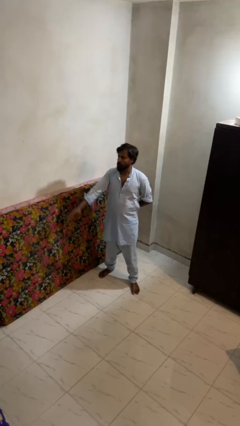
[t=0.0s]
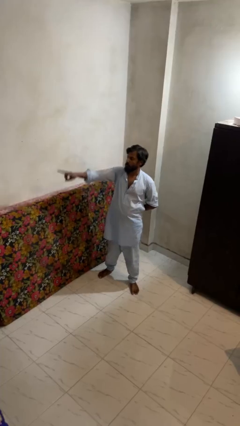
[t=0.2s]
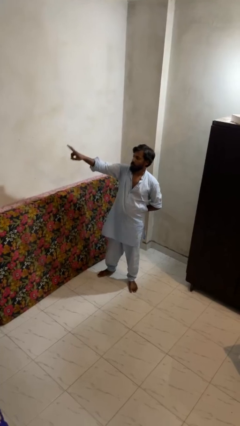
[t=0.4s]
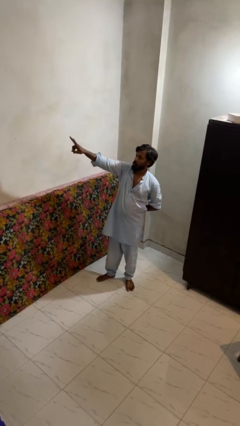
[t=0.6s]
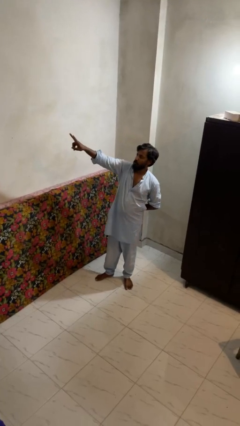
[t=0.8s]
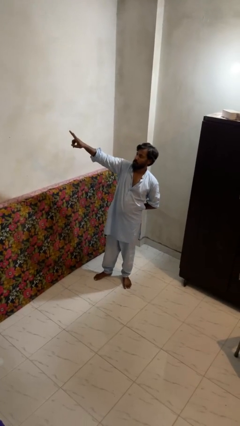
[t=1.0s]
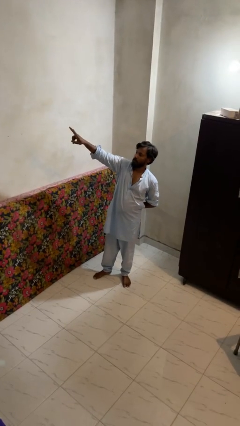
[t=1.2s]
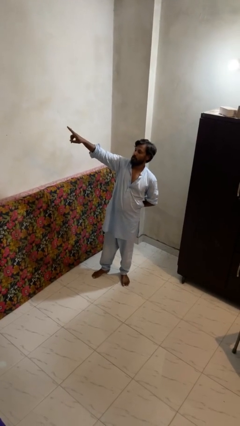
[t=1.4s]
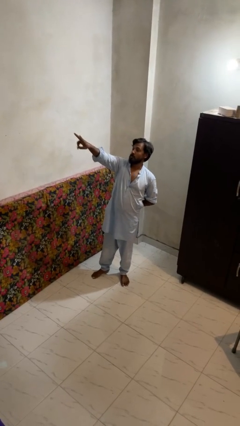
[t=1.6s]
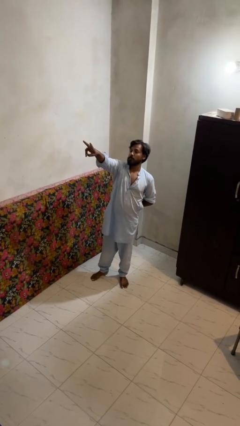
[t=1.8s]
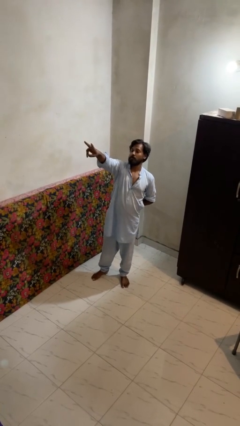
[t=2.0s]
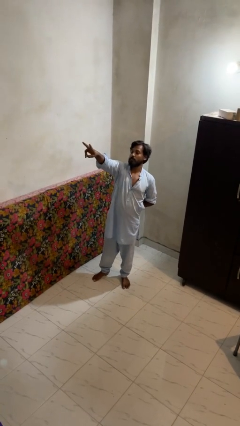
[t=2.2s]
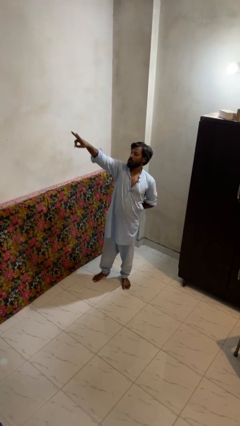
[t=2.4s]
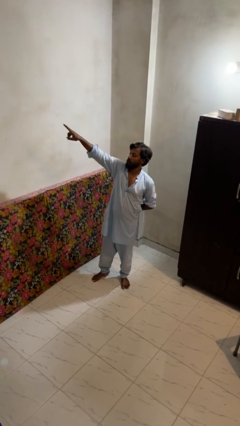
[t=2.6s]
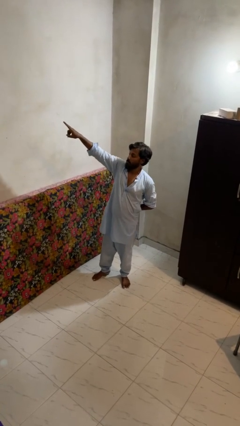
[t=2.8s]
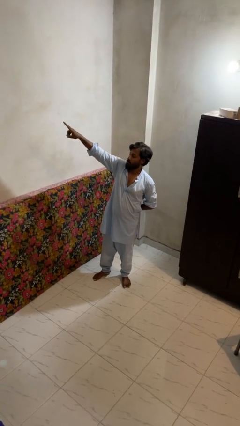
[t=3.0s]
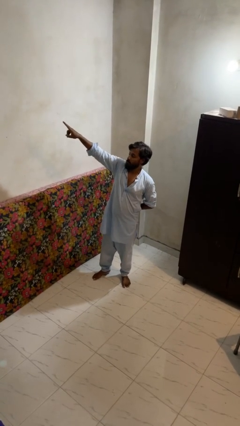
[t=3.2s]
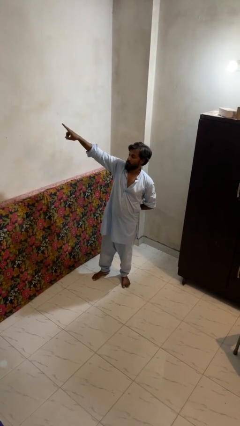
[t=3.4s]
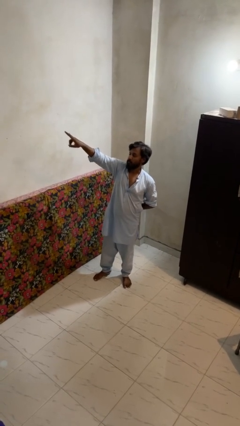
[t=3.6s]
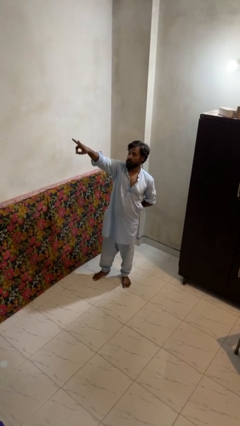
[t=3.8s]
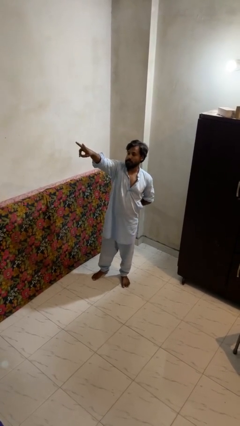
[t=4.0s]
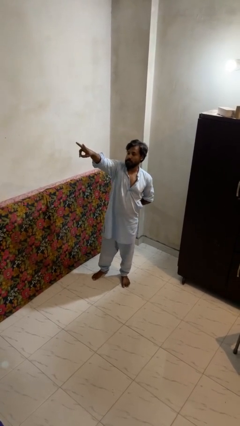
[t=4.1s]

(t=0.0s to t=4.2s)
person gestures peace

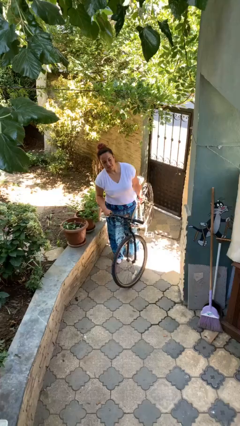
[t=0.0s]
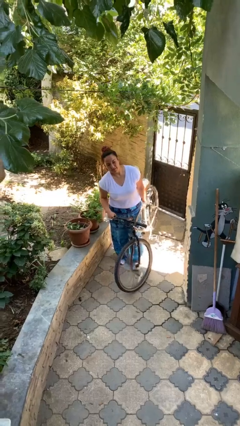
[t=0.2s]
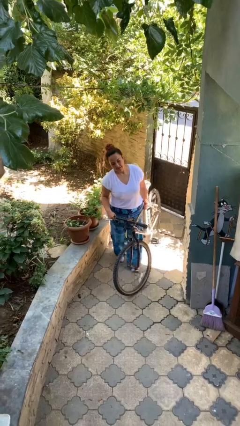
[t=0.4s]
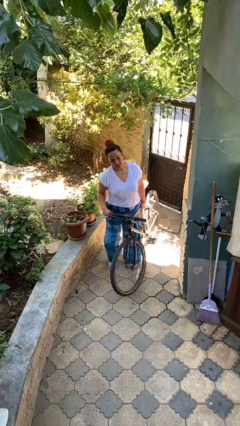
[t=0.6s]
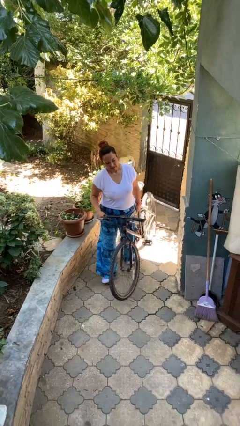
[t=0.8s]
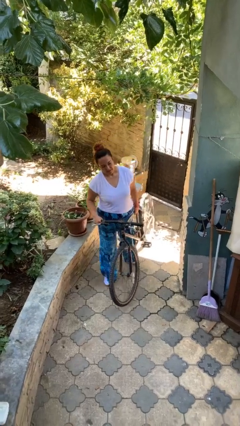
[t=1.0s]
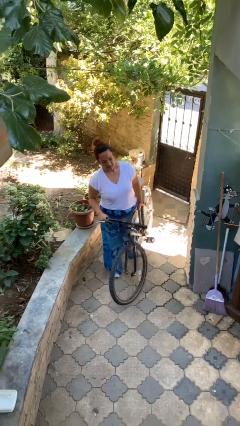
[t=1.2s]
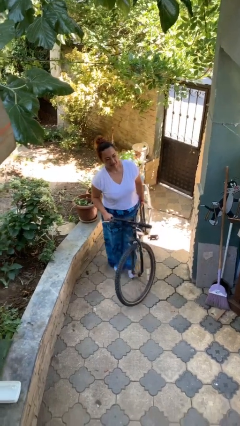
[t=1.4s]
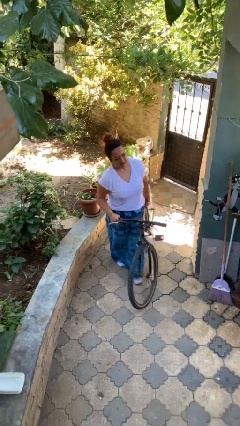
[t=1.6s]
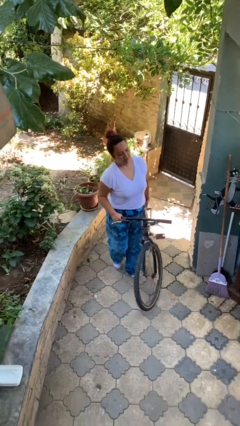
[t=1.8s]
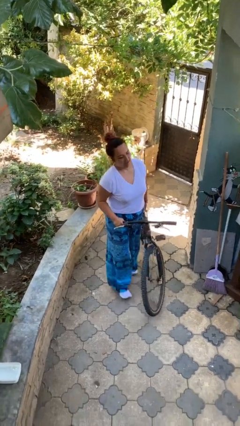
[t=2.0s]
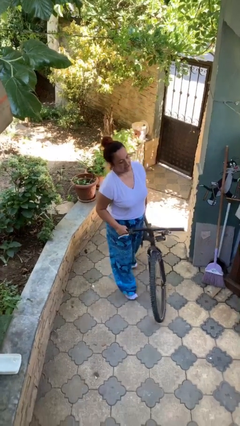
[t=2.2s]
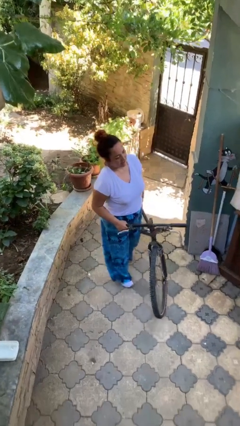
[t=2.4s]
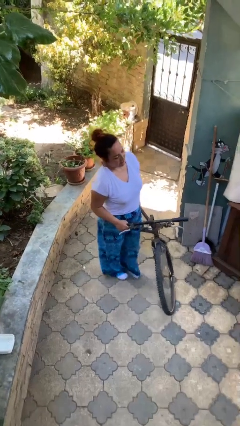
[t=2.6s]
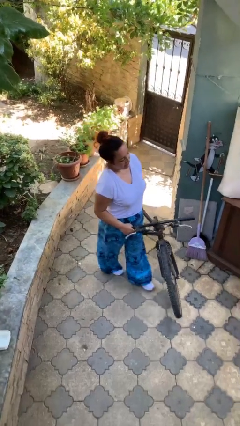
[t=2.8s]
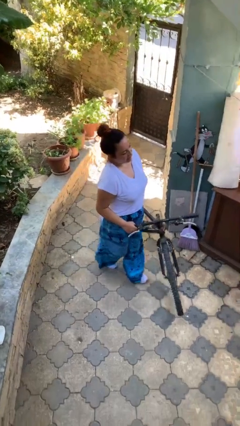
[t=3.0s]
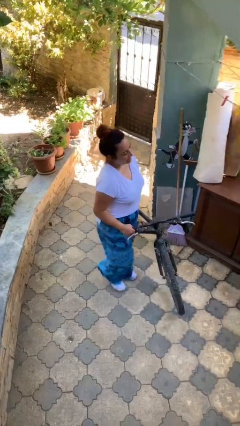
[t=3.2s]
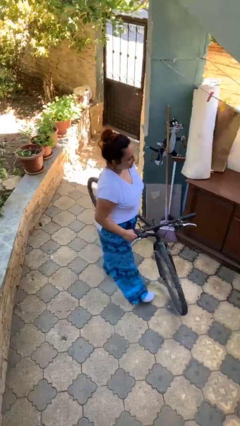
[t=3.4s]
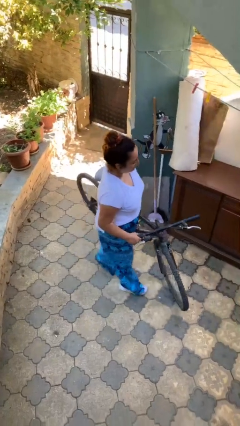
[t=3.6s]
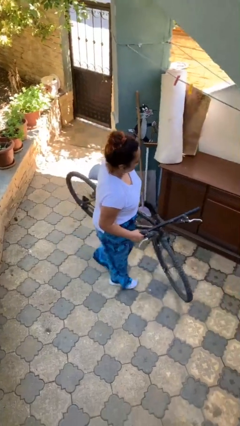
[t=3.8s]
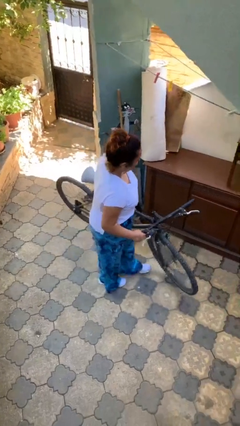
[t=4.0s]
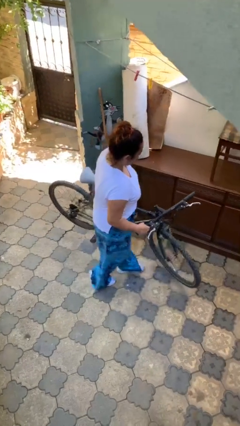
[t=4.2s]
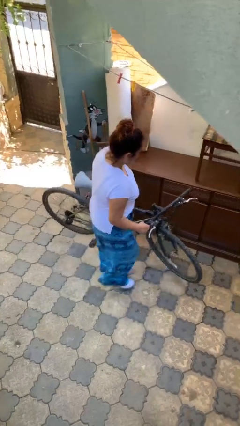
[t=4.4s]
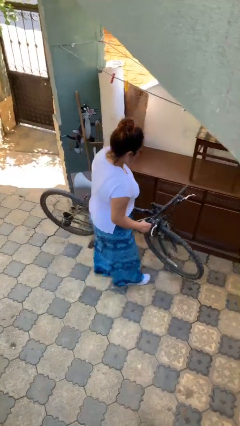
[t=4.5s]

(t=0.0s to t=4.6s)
person carries heavy object

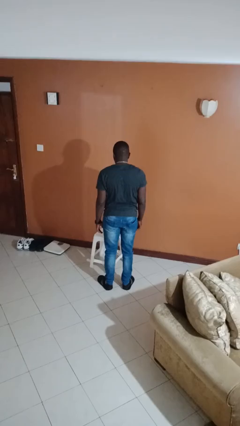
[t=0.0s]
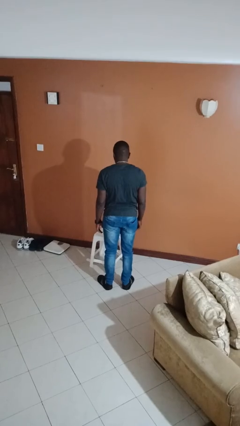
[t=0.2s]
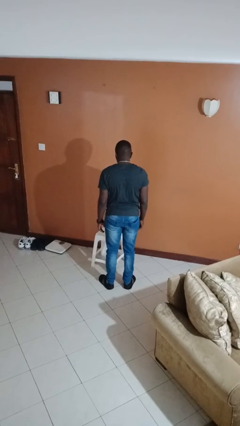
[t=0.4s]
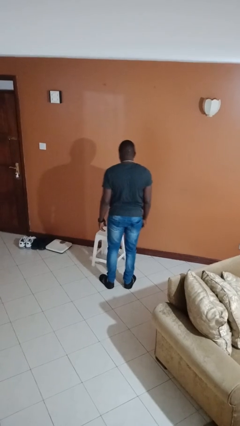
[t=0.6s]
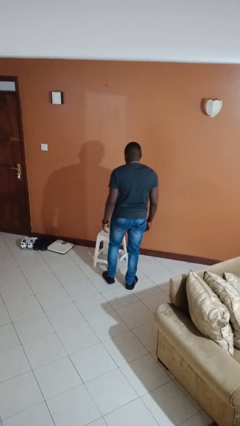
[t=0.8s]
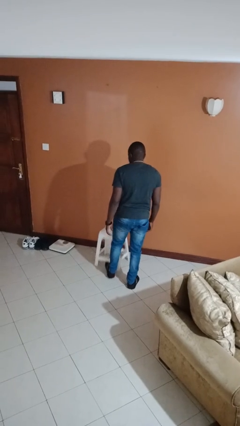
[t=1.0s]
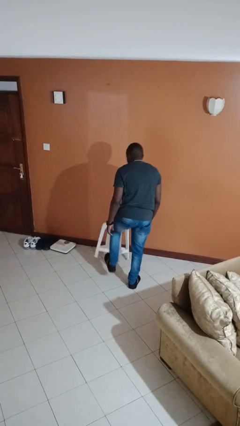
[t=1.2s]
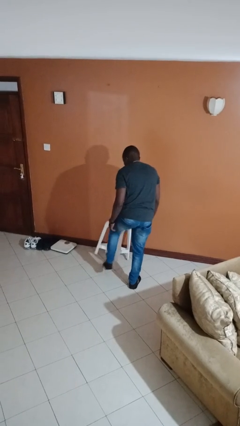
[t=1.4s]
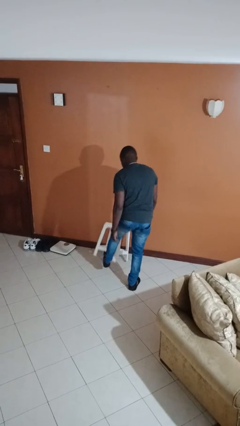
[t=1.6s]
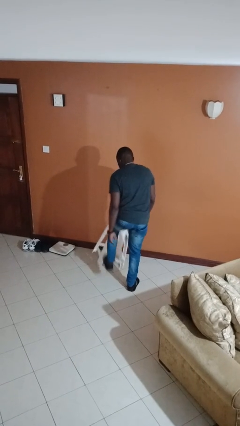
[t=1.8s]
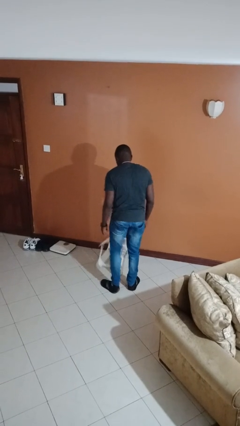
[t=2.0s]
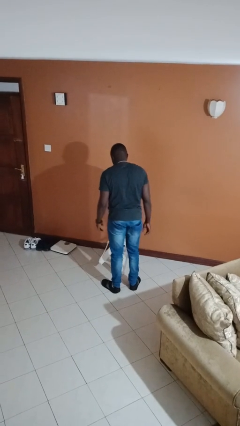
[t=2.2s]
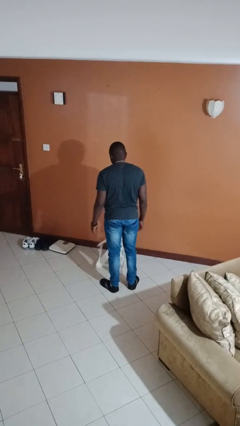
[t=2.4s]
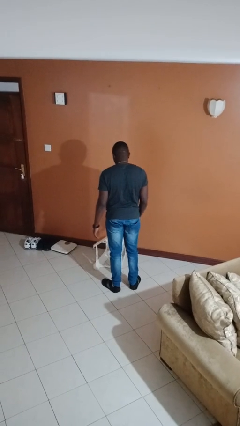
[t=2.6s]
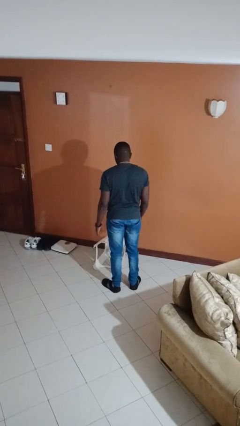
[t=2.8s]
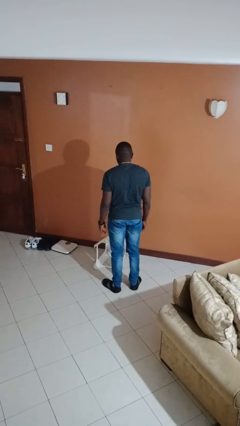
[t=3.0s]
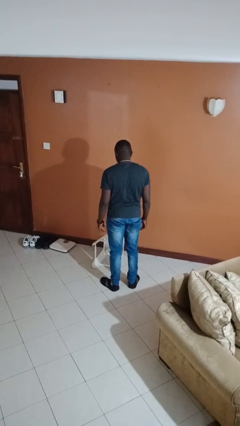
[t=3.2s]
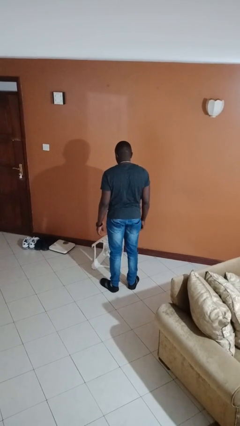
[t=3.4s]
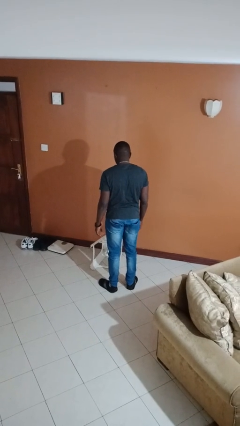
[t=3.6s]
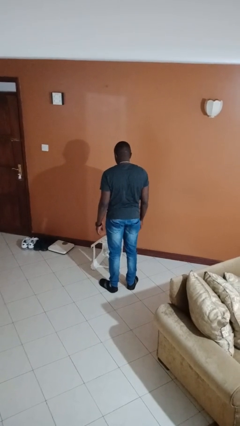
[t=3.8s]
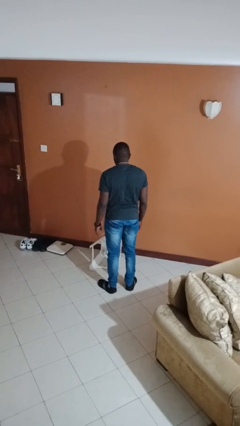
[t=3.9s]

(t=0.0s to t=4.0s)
person knocks over furniture

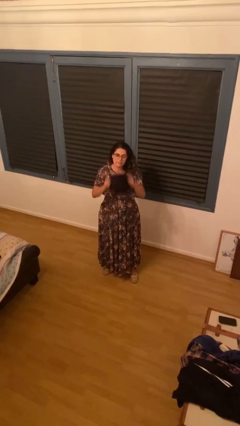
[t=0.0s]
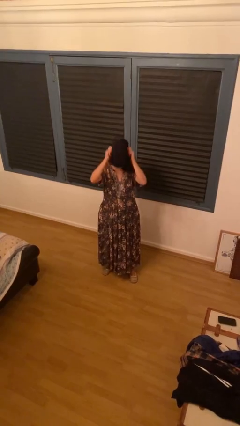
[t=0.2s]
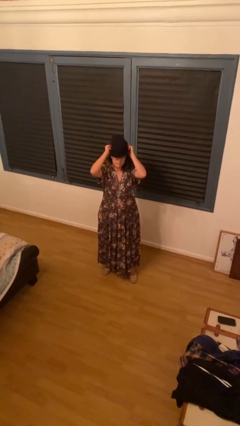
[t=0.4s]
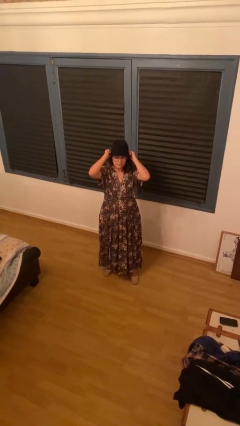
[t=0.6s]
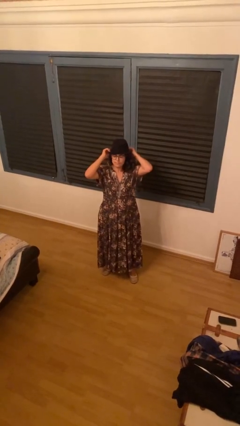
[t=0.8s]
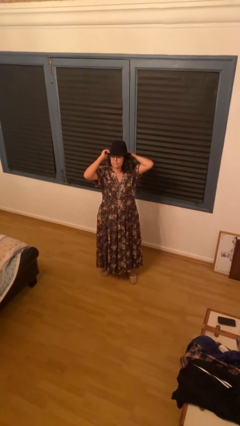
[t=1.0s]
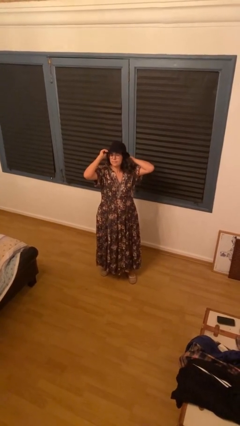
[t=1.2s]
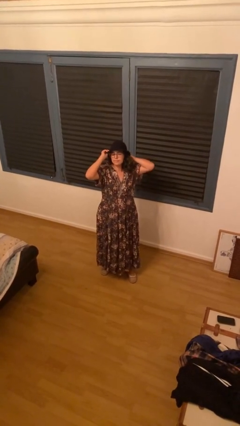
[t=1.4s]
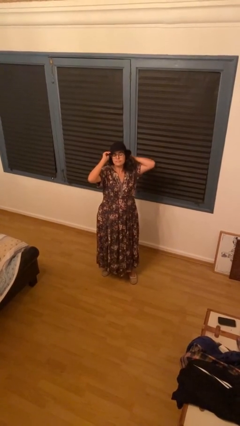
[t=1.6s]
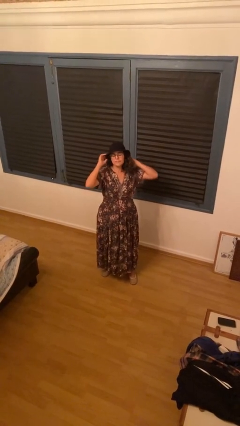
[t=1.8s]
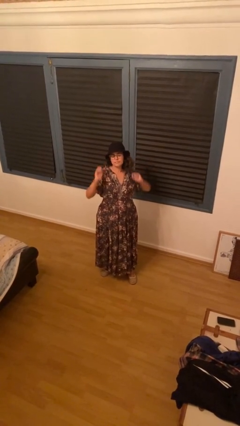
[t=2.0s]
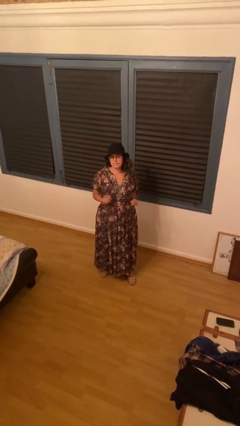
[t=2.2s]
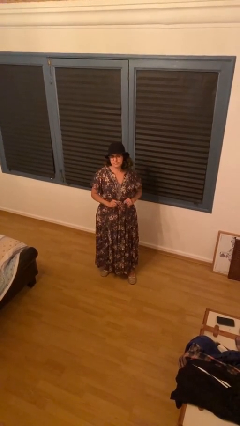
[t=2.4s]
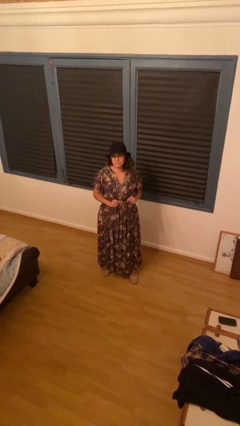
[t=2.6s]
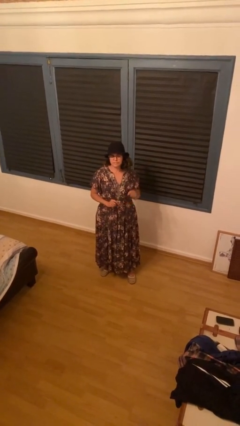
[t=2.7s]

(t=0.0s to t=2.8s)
person puts on hat

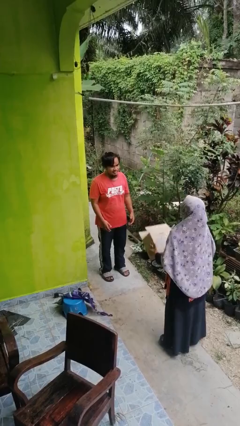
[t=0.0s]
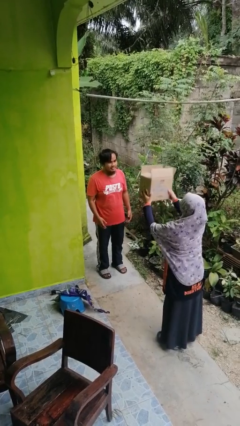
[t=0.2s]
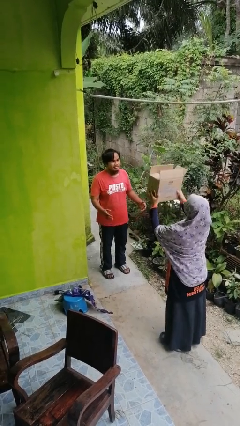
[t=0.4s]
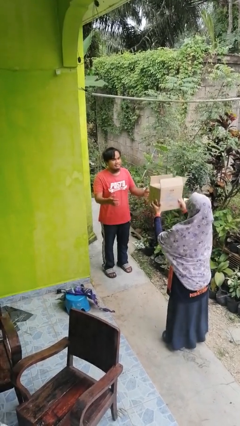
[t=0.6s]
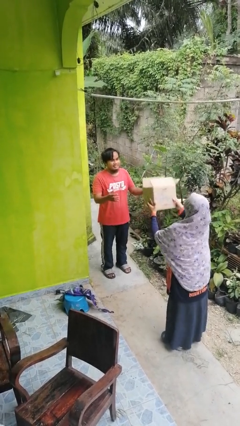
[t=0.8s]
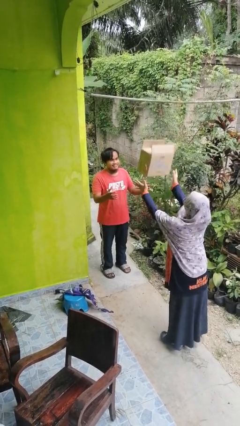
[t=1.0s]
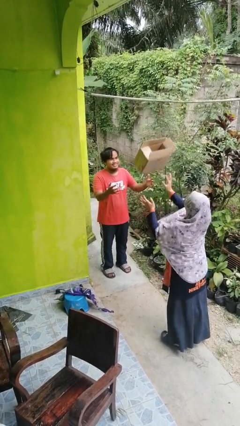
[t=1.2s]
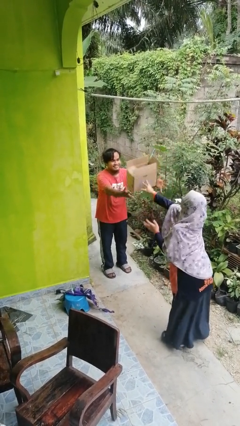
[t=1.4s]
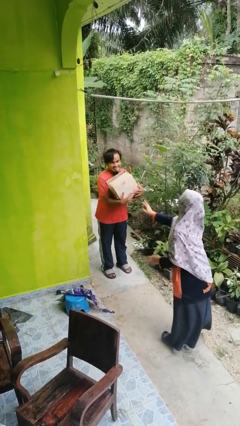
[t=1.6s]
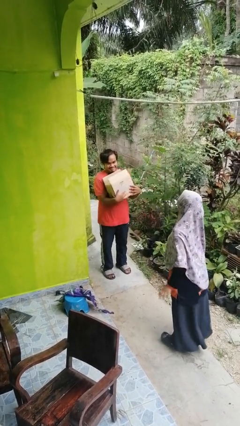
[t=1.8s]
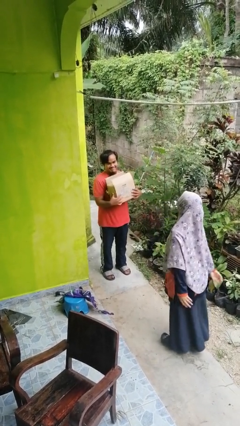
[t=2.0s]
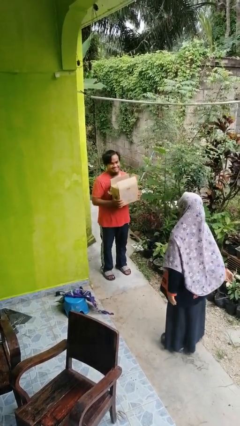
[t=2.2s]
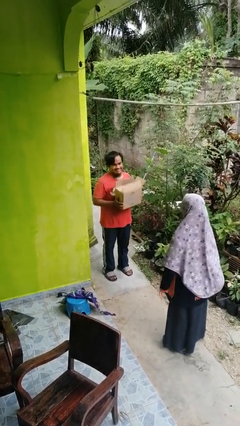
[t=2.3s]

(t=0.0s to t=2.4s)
person catches object from person
